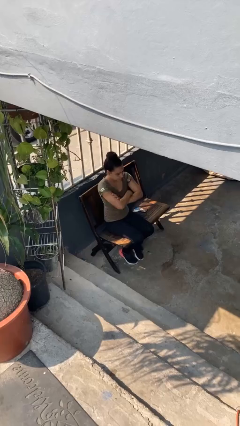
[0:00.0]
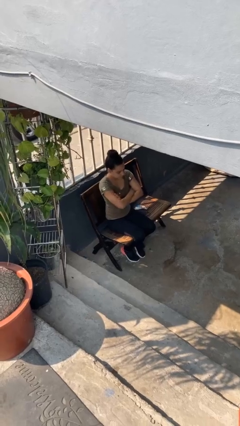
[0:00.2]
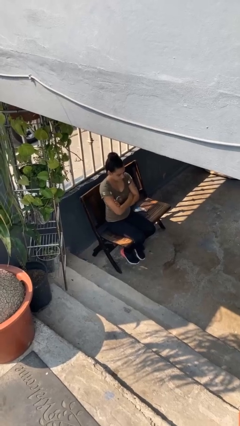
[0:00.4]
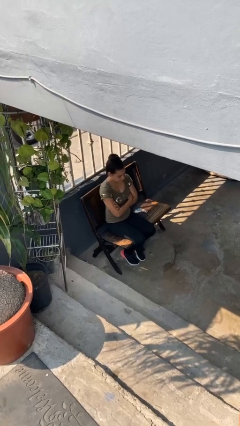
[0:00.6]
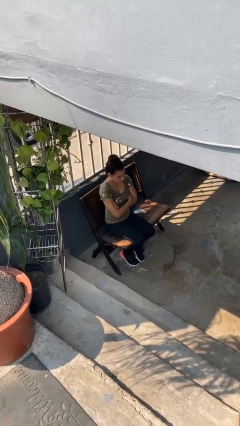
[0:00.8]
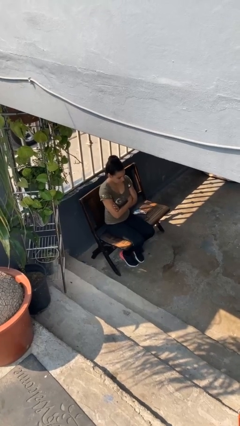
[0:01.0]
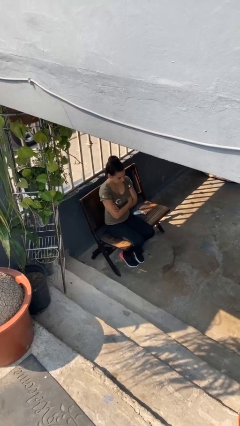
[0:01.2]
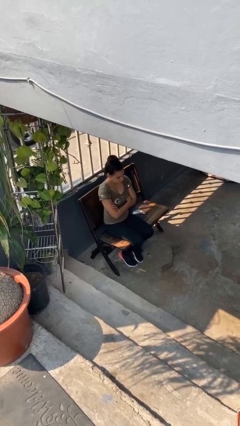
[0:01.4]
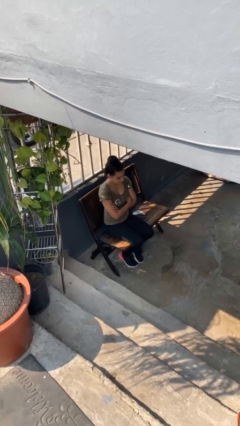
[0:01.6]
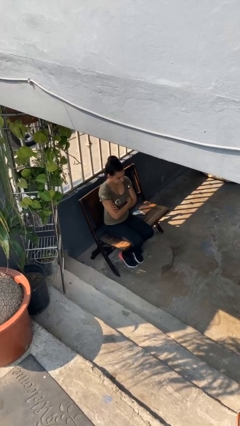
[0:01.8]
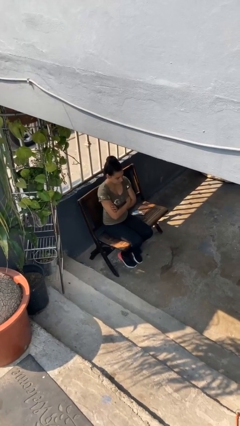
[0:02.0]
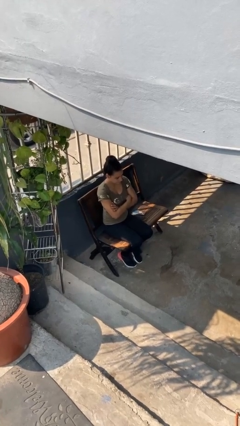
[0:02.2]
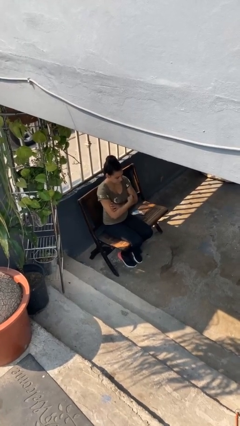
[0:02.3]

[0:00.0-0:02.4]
person crosses arms

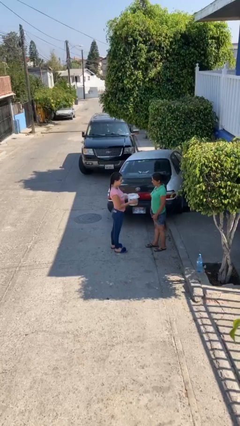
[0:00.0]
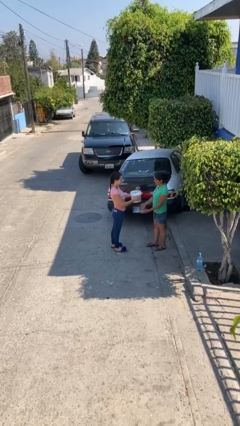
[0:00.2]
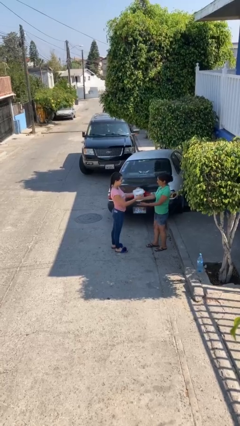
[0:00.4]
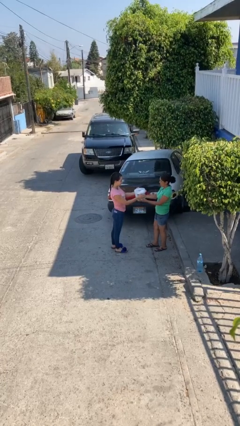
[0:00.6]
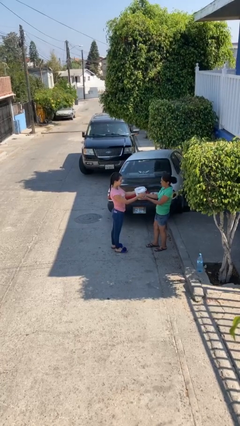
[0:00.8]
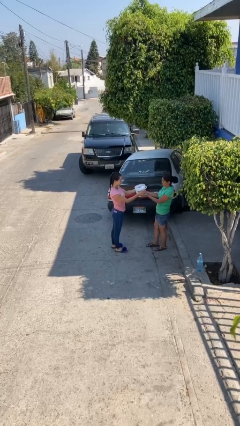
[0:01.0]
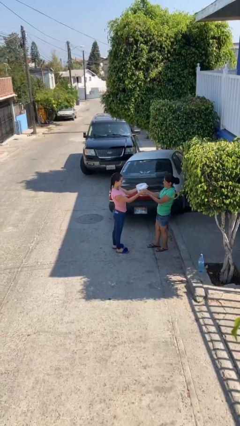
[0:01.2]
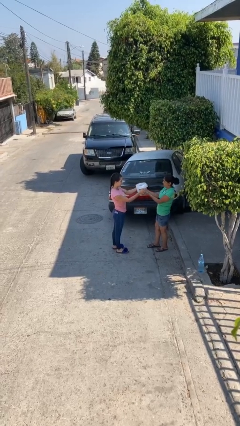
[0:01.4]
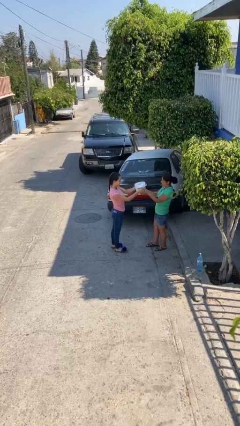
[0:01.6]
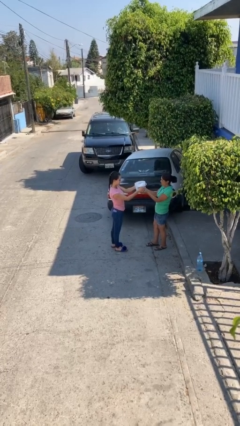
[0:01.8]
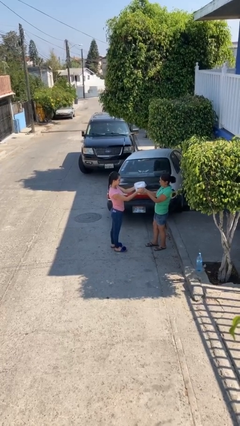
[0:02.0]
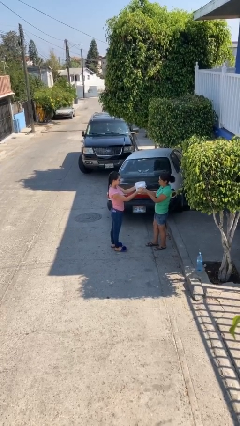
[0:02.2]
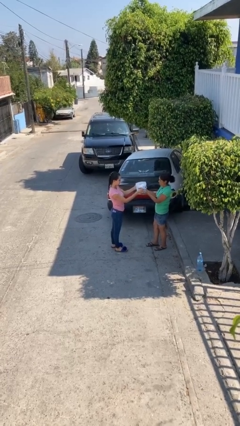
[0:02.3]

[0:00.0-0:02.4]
person transfers object to person

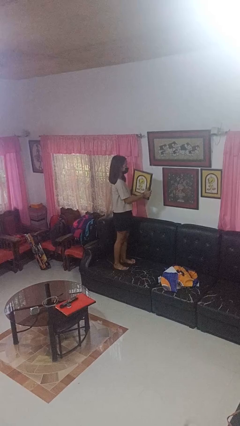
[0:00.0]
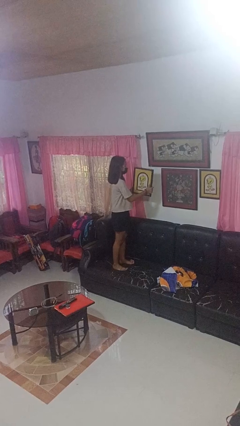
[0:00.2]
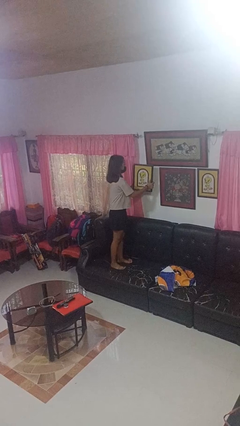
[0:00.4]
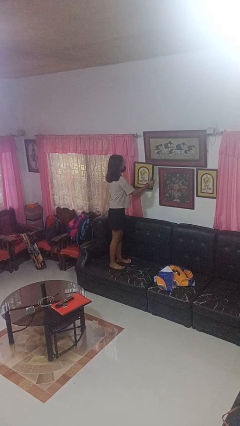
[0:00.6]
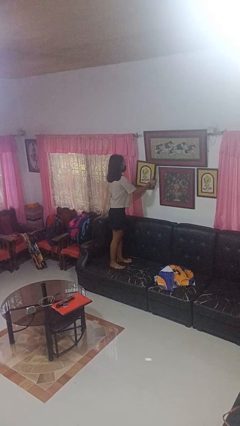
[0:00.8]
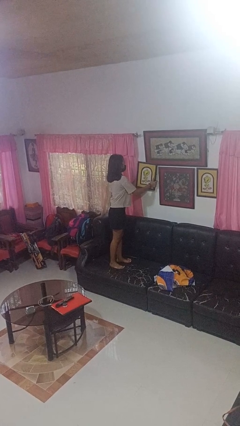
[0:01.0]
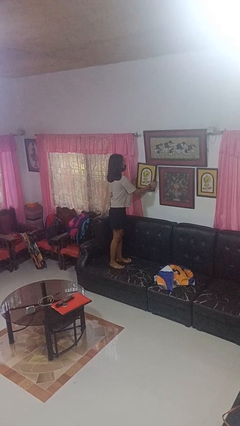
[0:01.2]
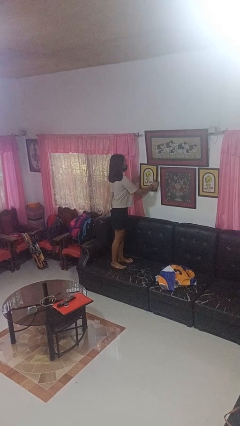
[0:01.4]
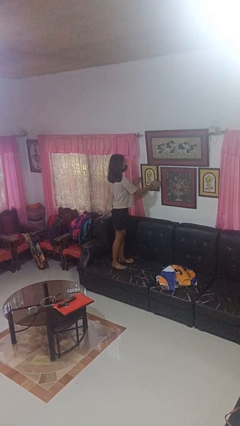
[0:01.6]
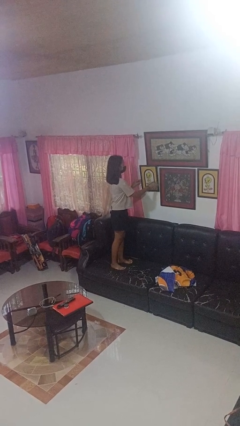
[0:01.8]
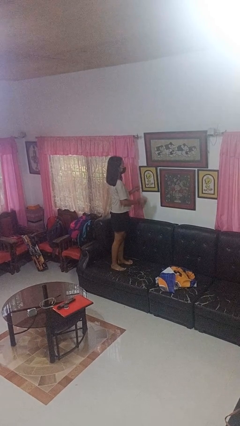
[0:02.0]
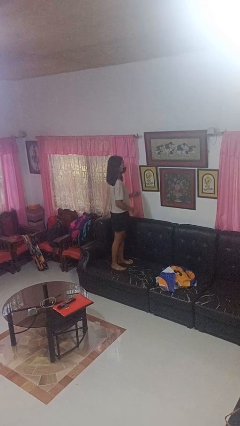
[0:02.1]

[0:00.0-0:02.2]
person puts up picture frame

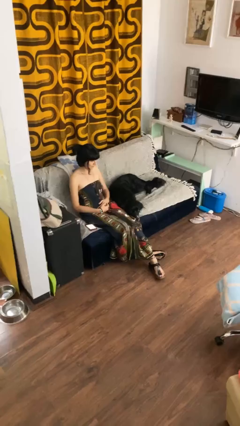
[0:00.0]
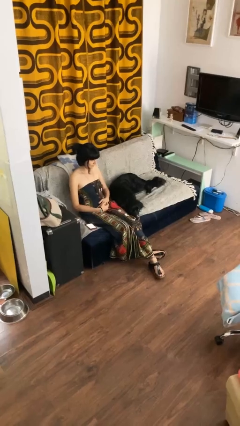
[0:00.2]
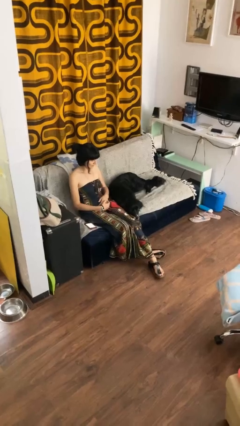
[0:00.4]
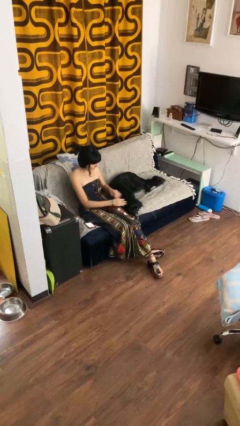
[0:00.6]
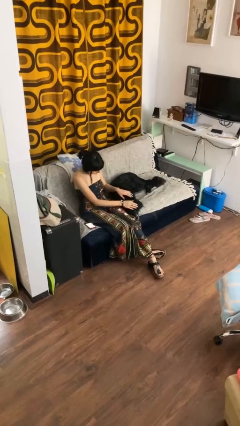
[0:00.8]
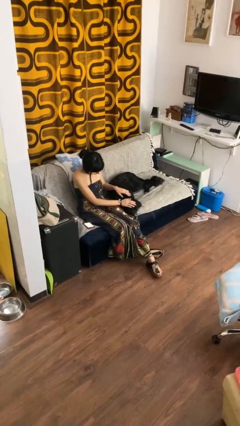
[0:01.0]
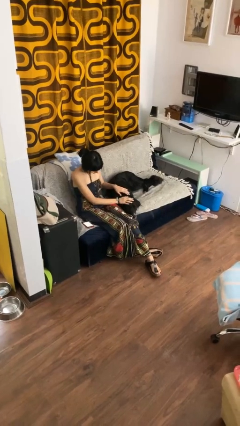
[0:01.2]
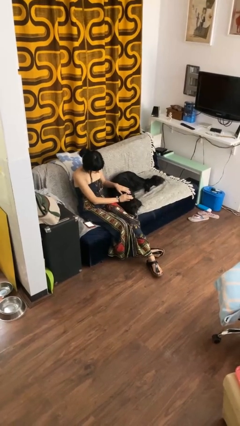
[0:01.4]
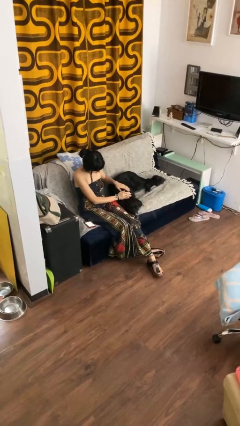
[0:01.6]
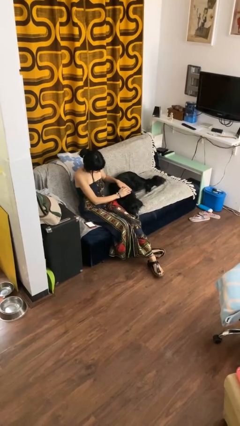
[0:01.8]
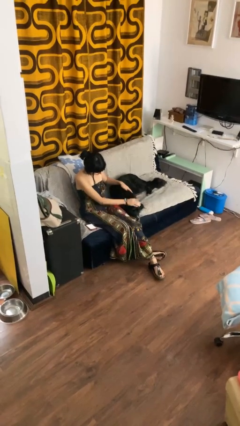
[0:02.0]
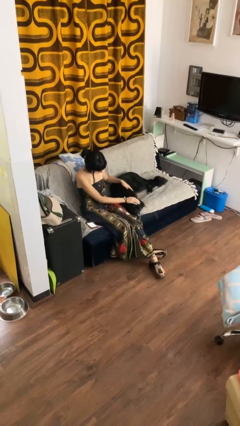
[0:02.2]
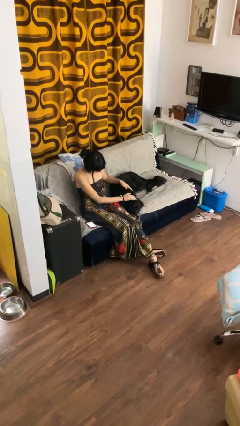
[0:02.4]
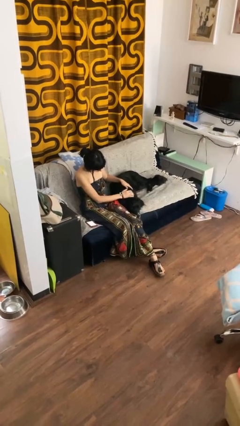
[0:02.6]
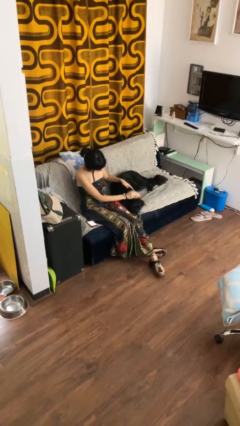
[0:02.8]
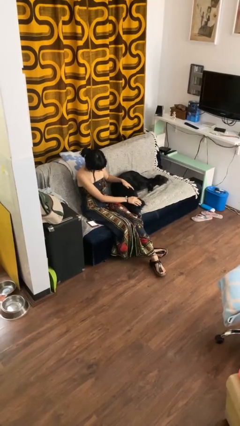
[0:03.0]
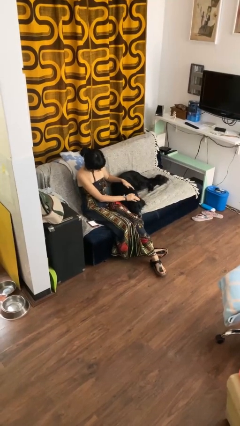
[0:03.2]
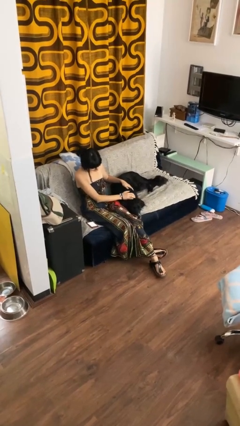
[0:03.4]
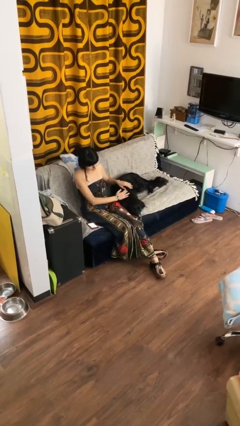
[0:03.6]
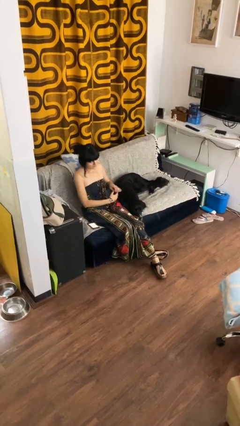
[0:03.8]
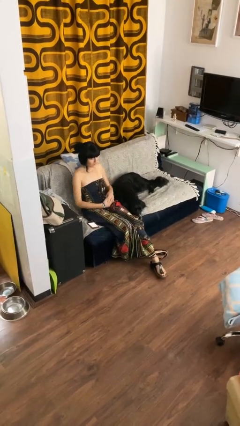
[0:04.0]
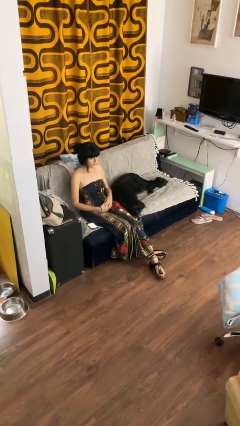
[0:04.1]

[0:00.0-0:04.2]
person pets dog

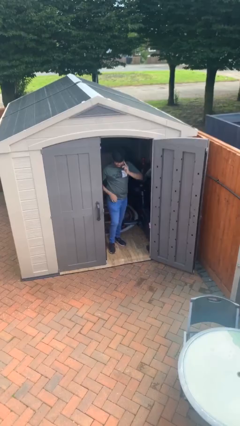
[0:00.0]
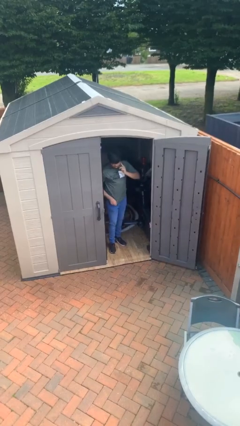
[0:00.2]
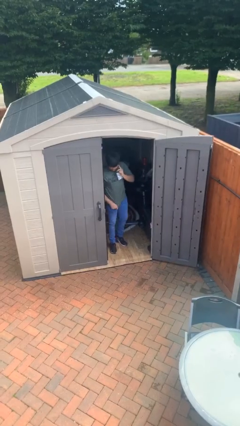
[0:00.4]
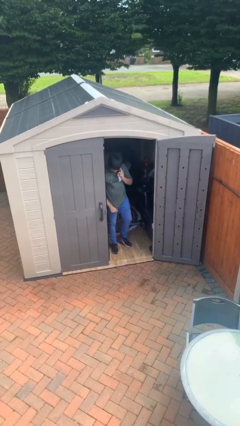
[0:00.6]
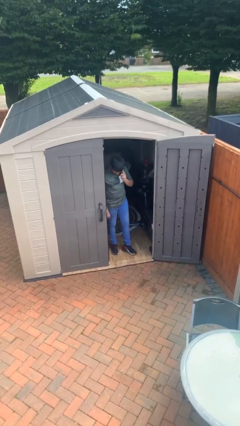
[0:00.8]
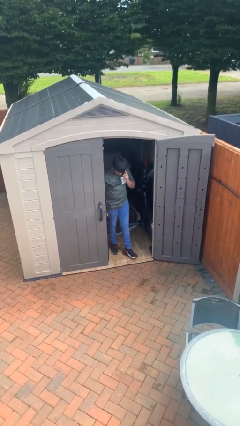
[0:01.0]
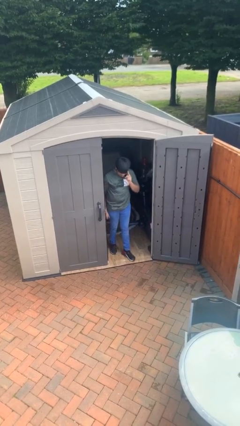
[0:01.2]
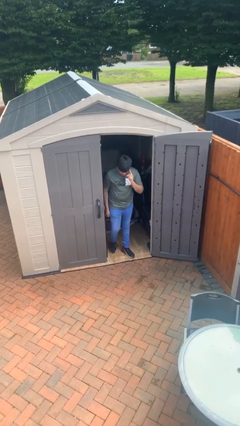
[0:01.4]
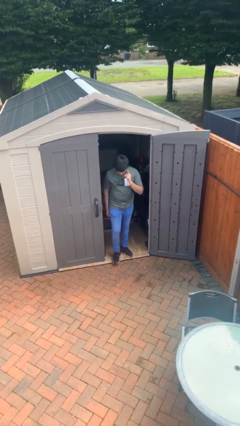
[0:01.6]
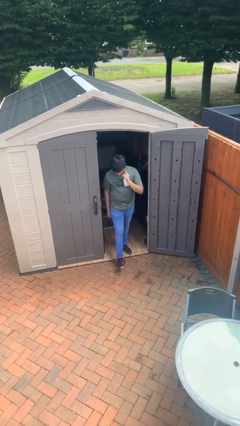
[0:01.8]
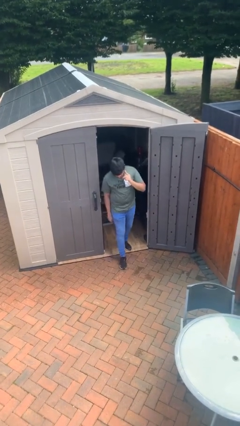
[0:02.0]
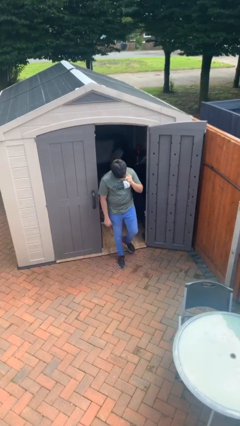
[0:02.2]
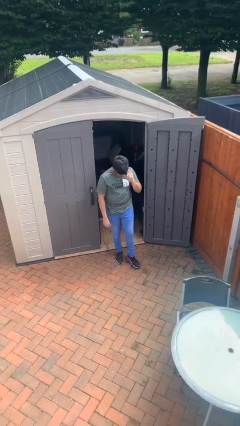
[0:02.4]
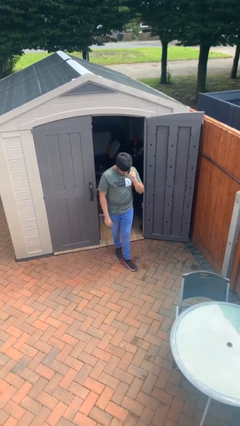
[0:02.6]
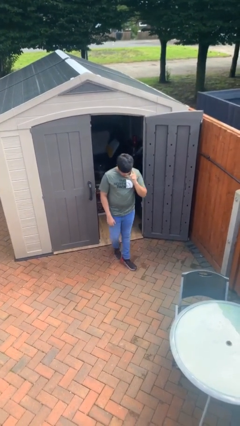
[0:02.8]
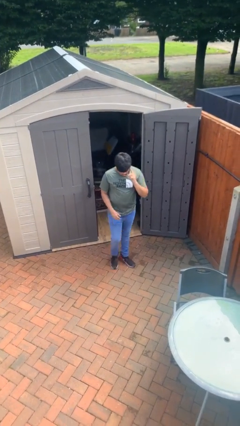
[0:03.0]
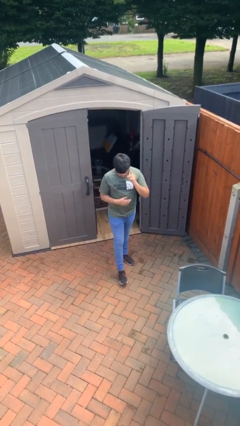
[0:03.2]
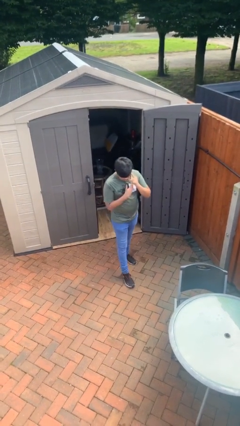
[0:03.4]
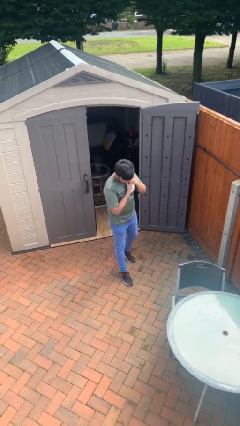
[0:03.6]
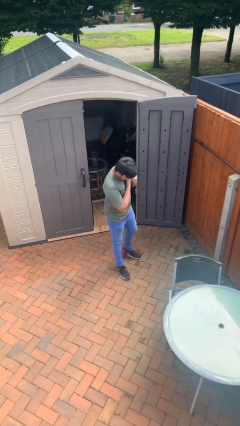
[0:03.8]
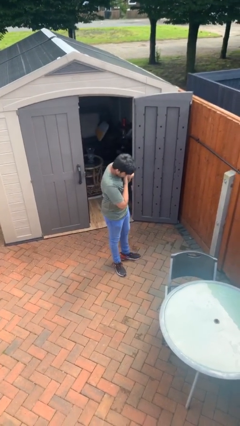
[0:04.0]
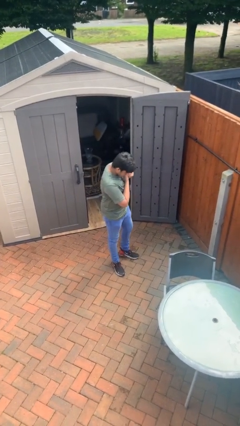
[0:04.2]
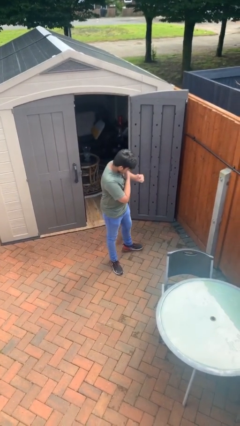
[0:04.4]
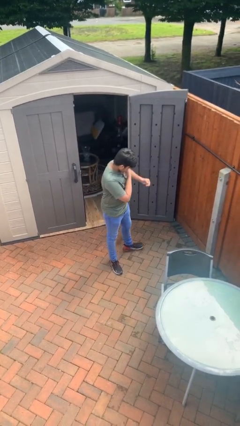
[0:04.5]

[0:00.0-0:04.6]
person enters scene through structure

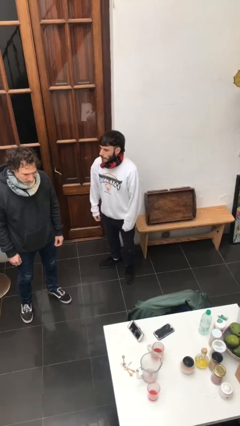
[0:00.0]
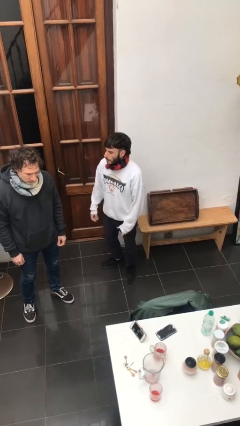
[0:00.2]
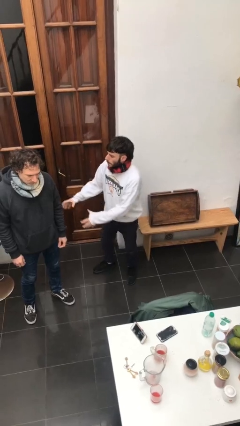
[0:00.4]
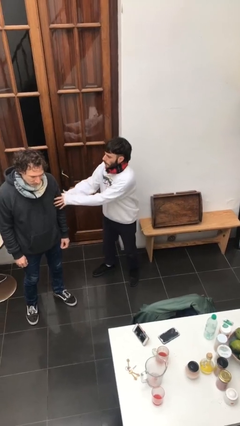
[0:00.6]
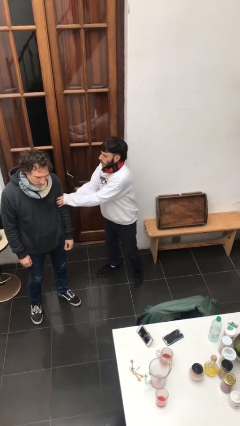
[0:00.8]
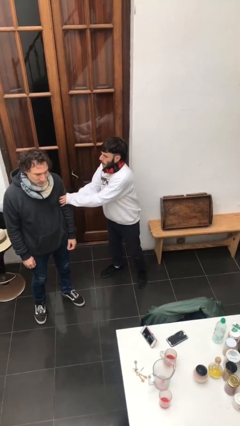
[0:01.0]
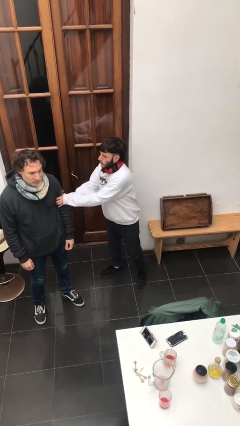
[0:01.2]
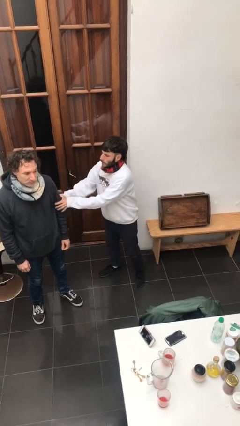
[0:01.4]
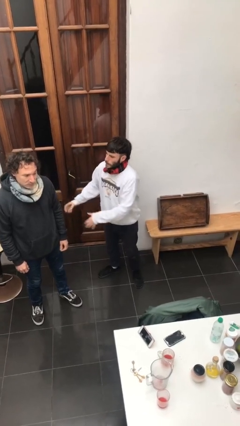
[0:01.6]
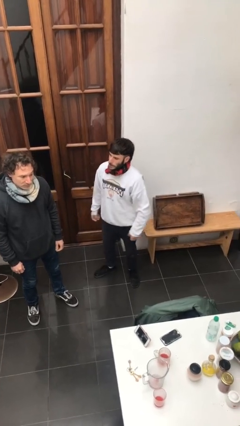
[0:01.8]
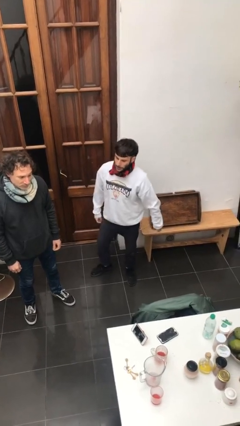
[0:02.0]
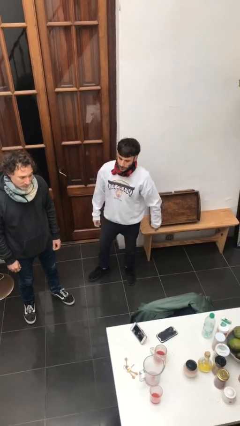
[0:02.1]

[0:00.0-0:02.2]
person grabs person by bicep
